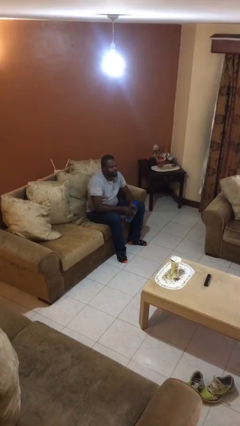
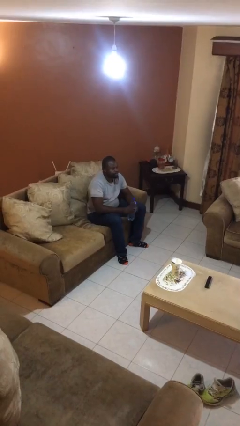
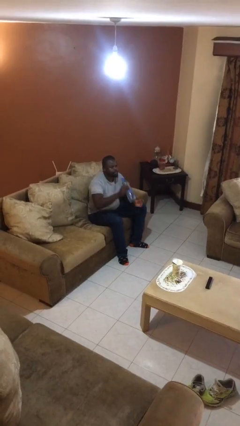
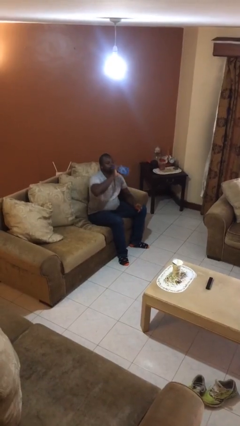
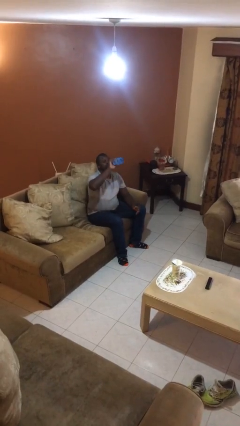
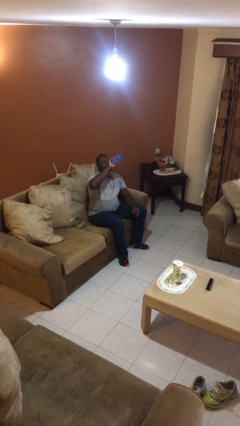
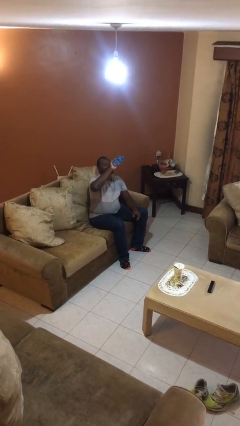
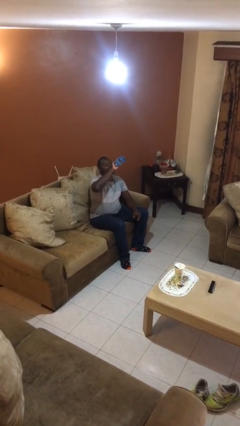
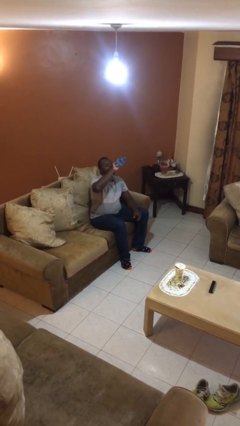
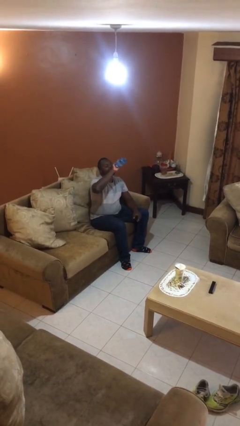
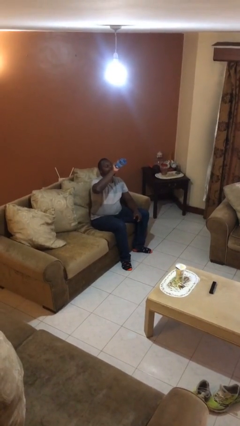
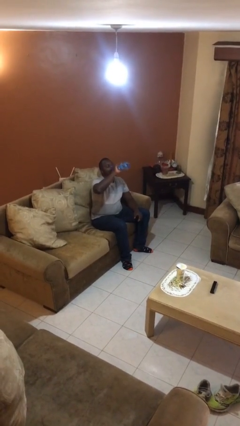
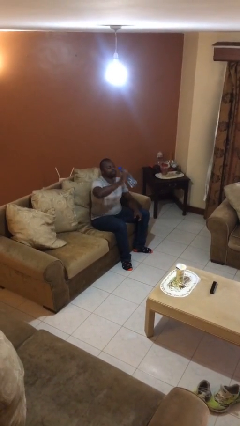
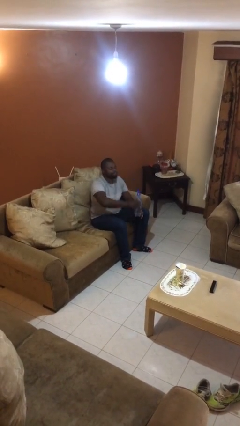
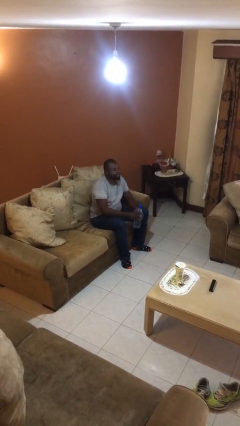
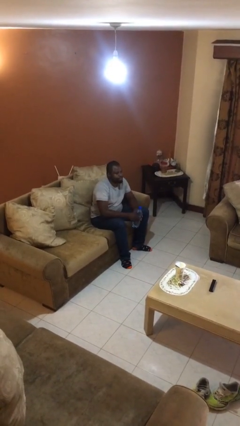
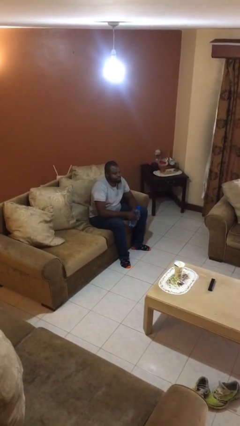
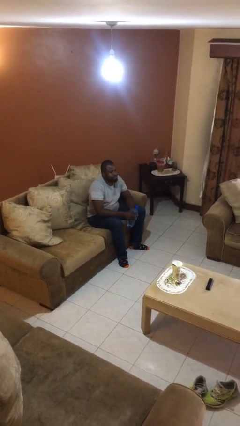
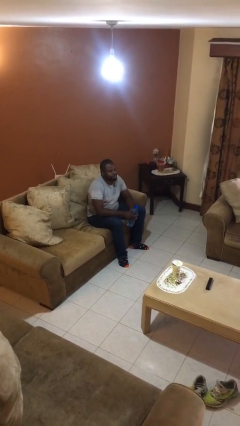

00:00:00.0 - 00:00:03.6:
person drinks from bottle

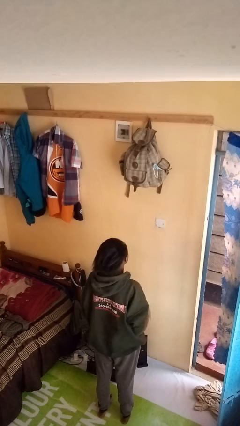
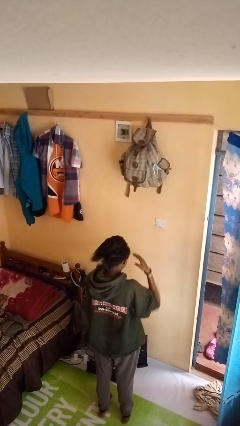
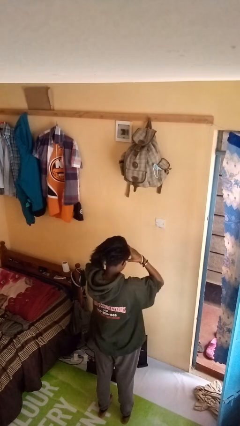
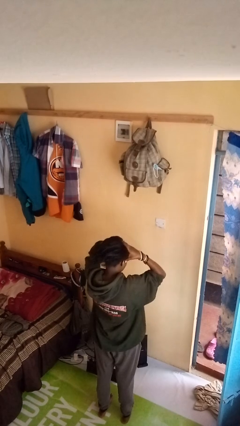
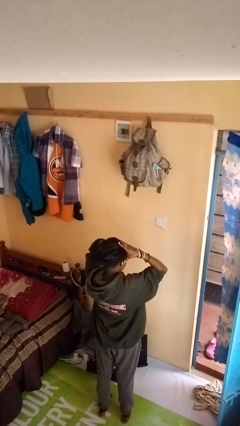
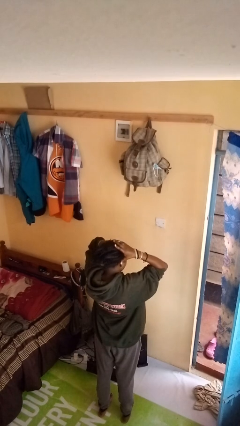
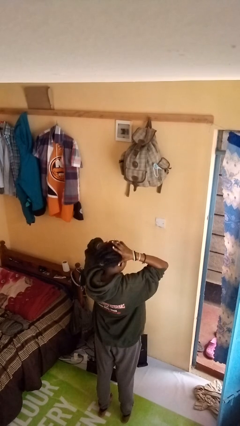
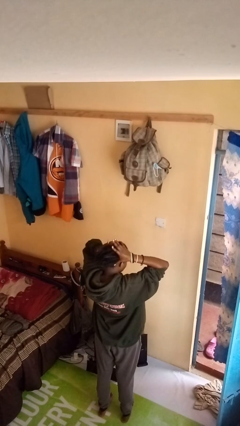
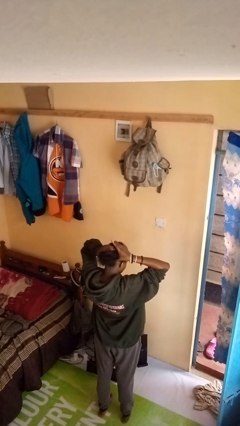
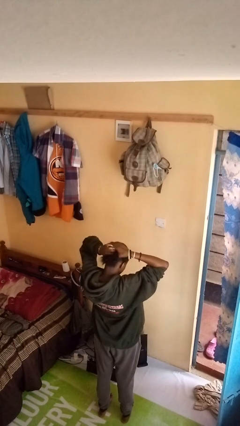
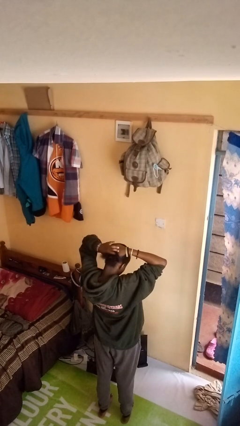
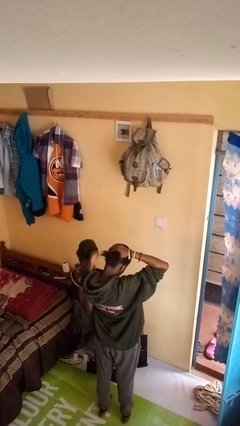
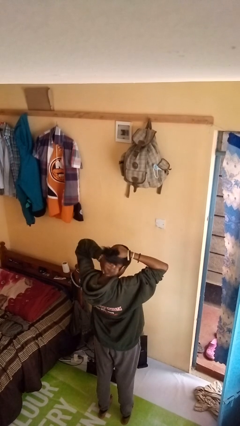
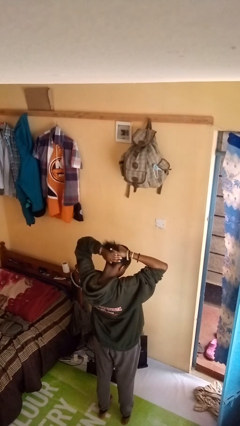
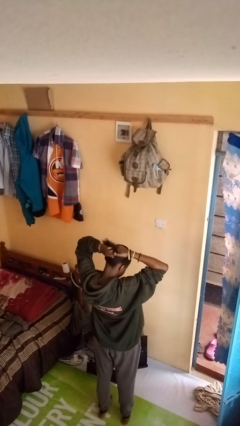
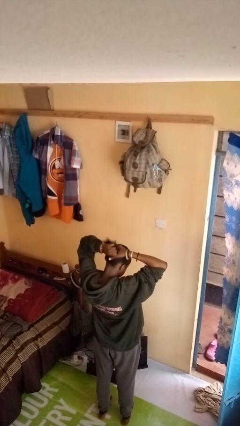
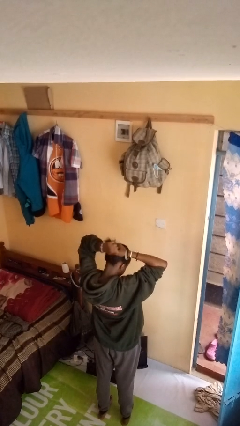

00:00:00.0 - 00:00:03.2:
person strokes hair

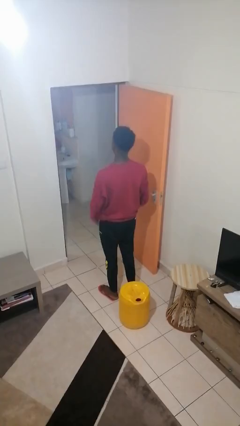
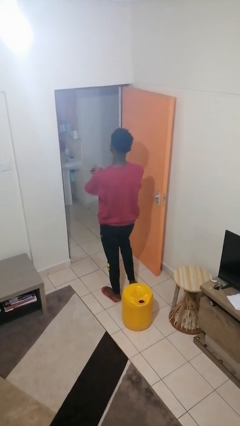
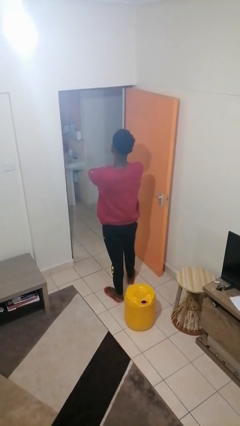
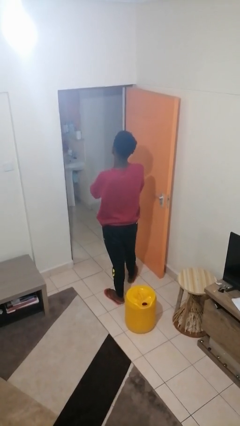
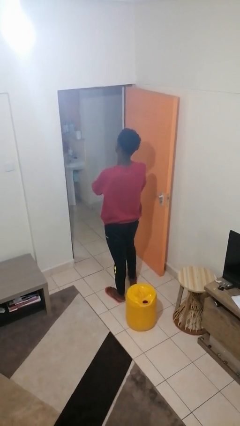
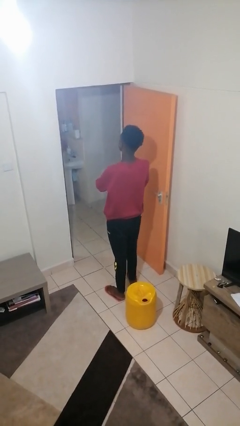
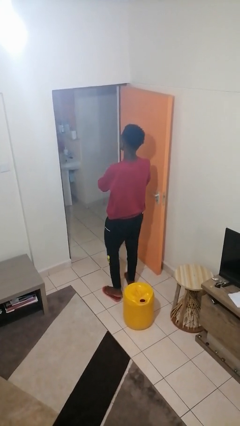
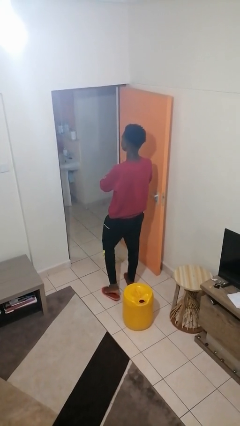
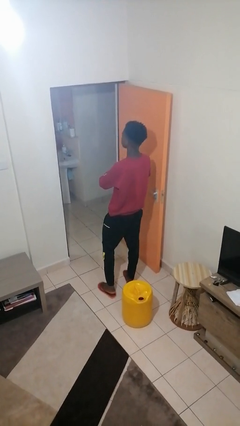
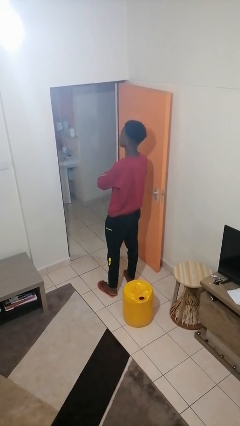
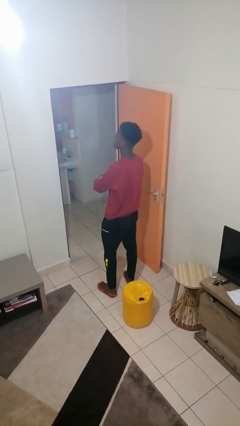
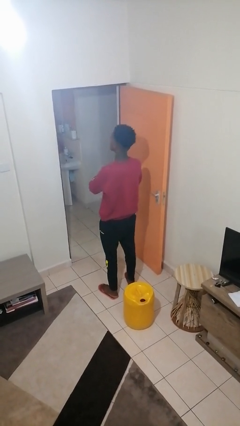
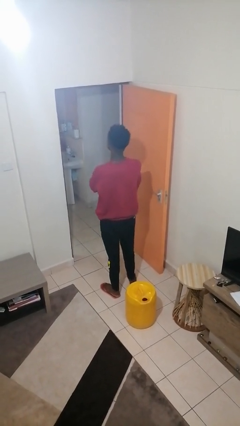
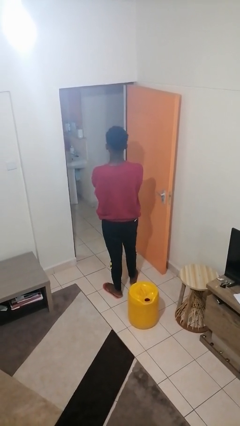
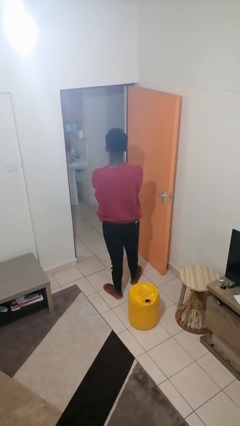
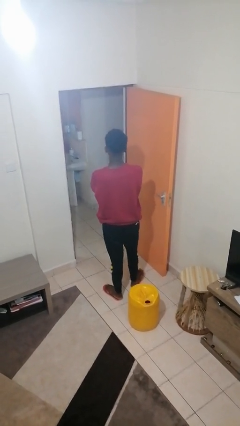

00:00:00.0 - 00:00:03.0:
person crosses arms

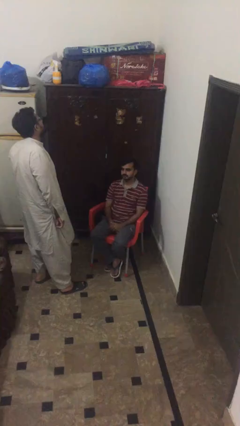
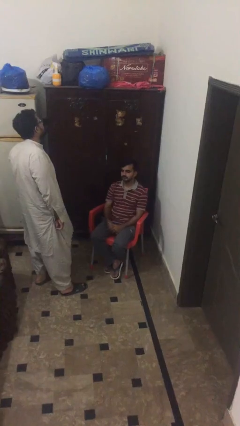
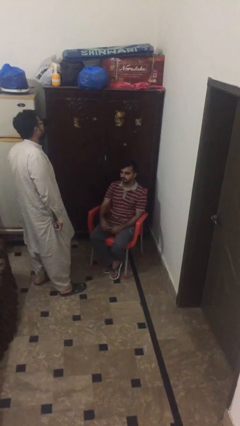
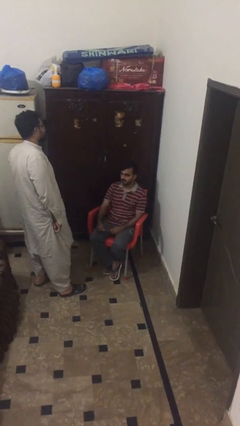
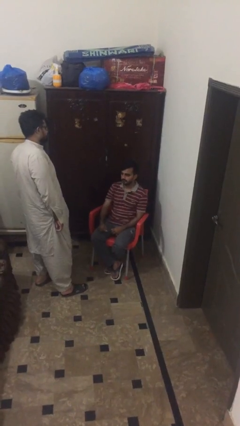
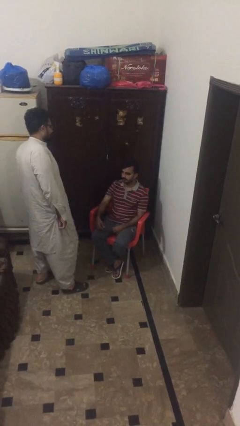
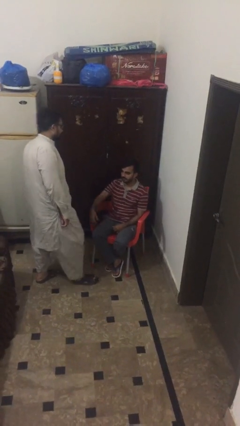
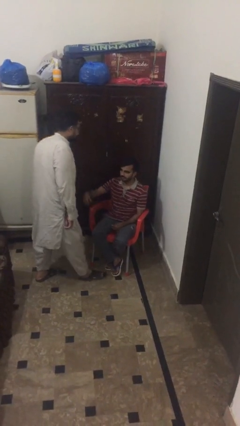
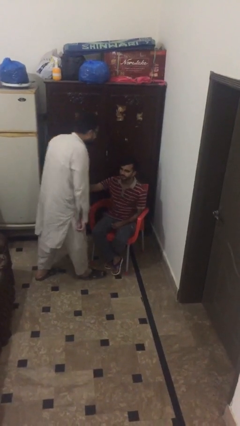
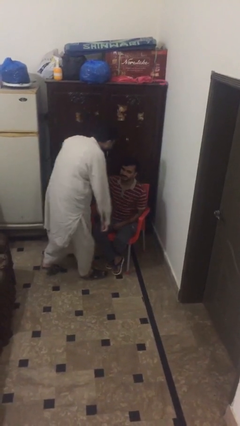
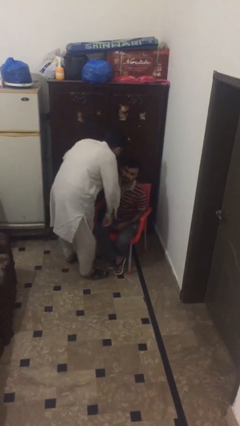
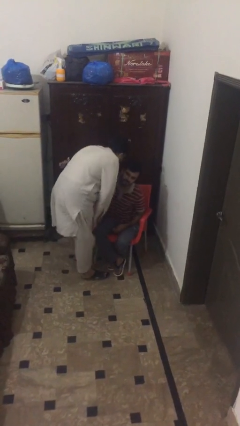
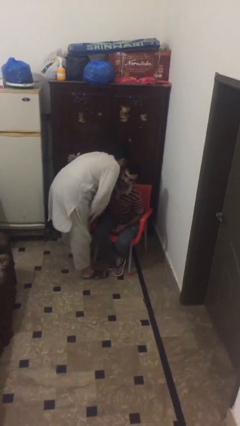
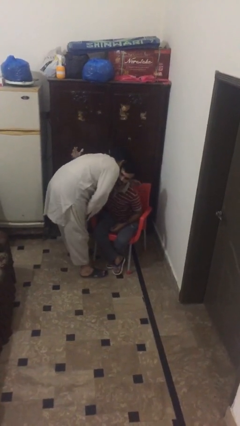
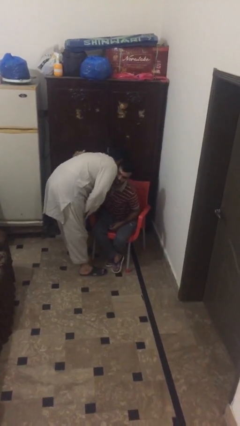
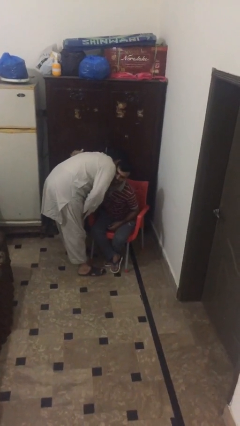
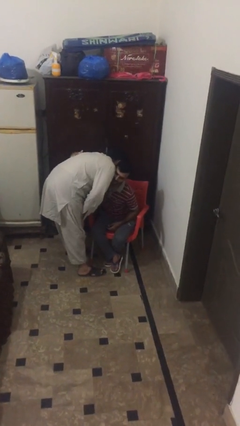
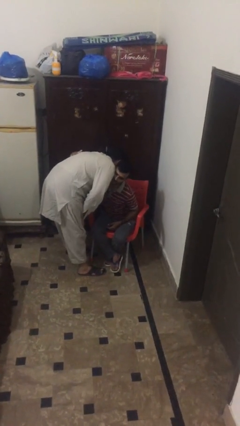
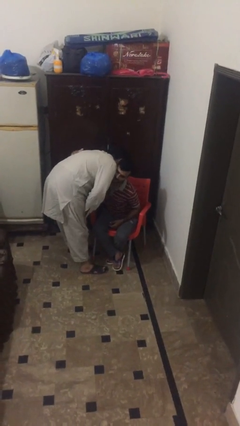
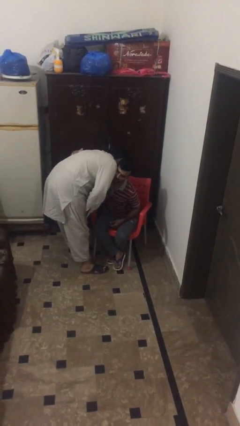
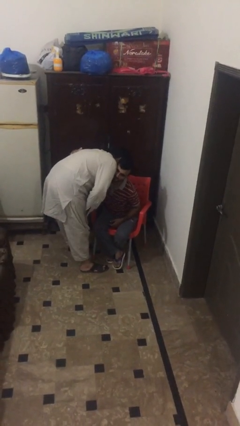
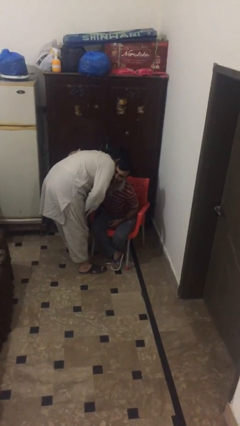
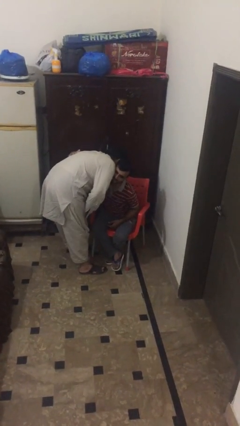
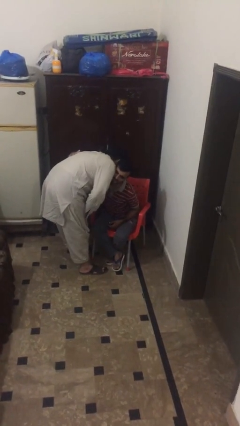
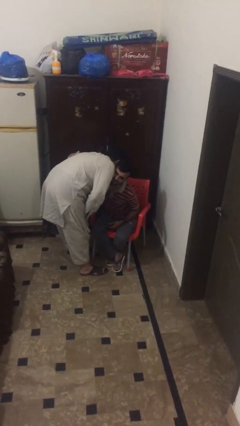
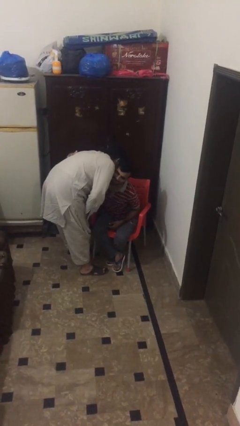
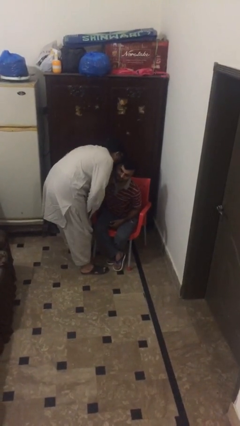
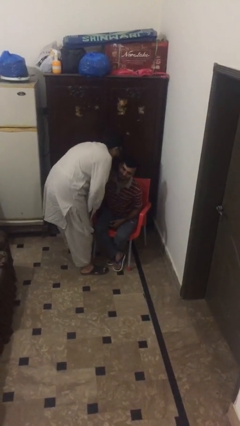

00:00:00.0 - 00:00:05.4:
person embraces person

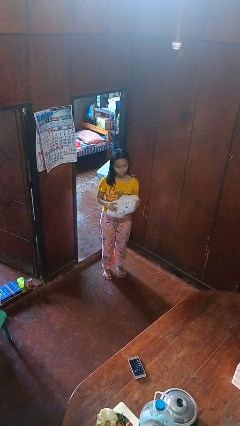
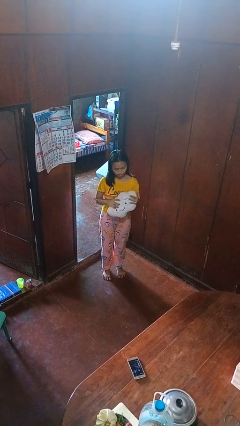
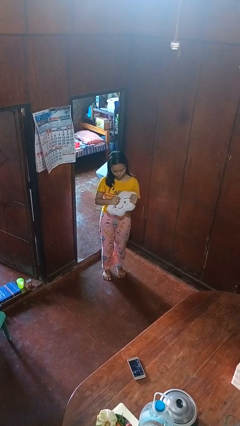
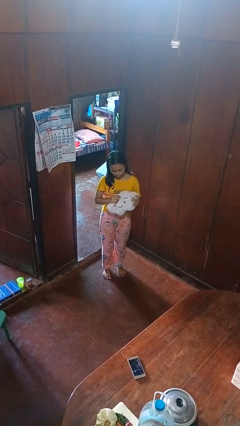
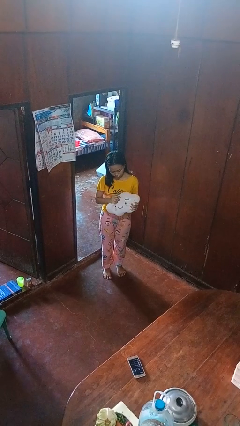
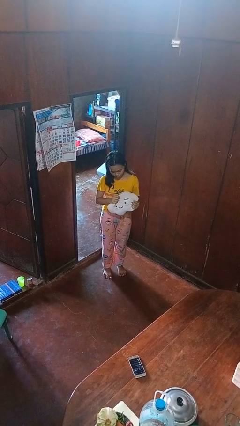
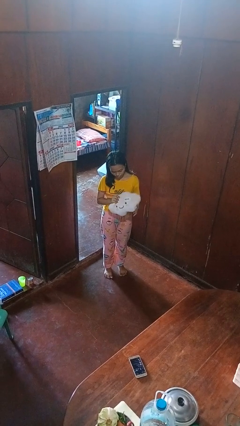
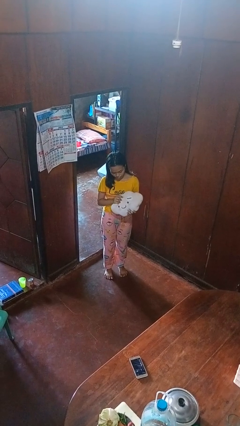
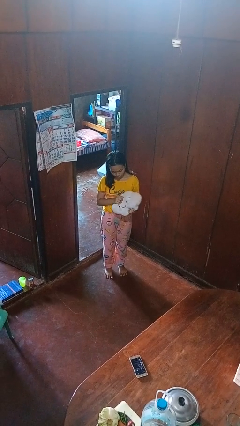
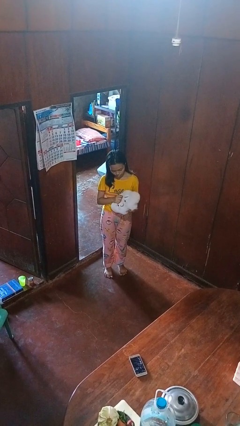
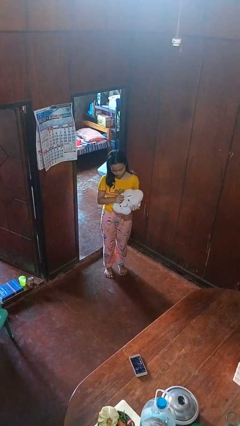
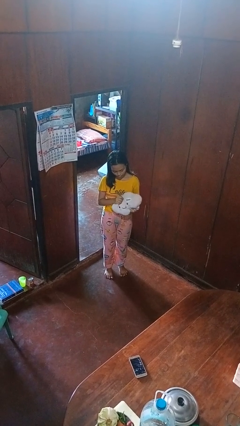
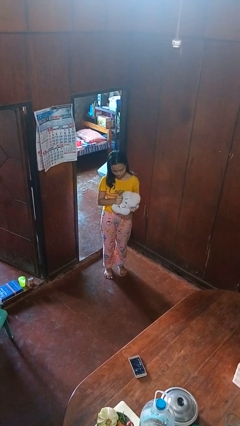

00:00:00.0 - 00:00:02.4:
person squeezes object

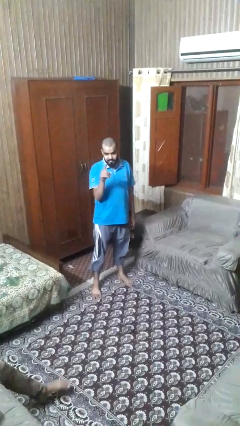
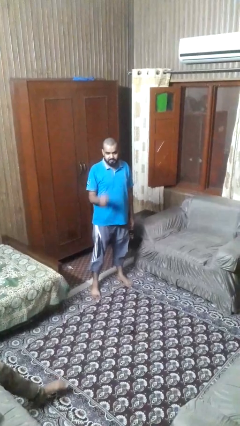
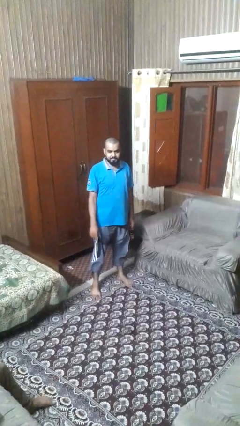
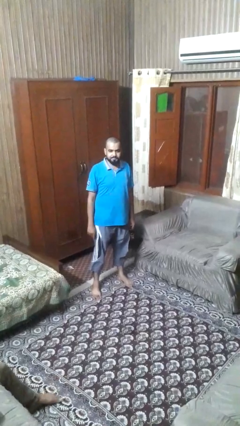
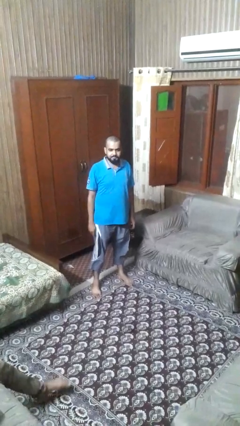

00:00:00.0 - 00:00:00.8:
person points at person
